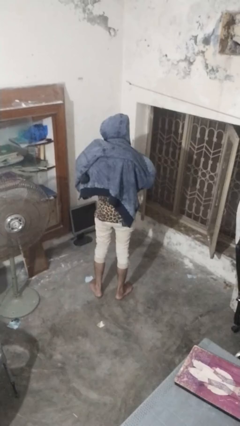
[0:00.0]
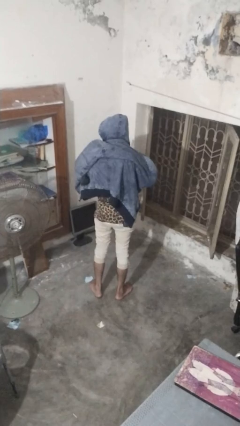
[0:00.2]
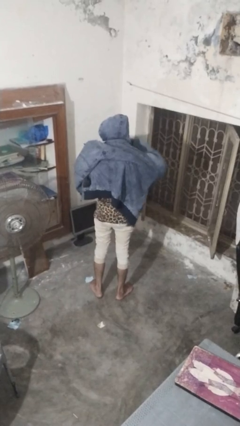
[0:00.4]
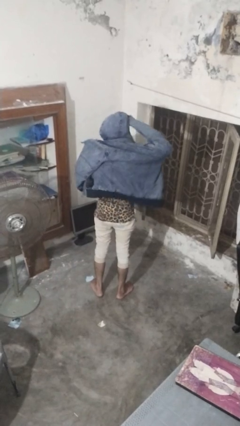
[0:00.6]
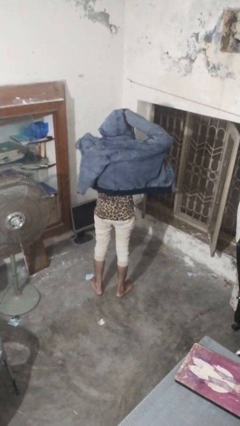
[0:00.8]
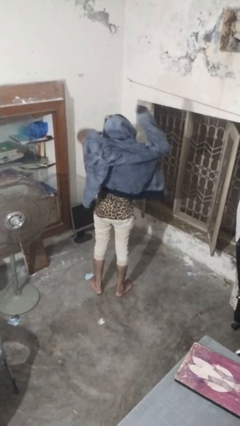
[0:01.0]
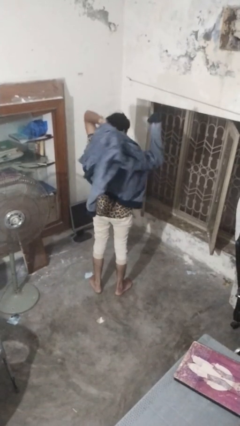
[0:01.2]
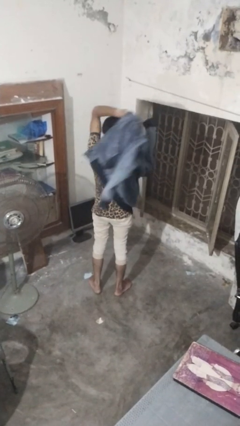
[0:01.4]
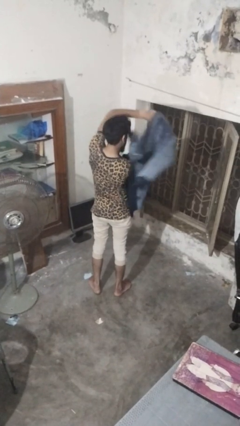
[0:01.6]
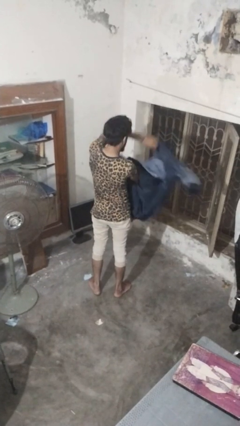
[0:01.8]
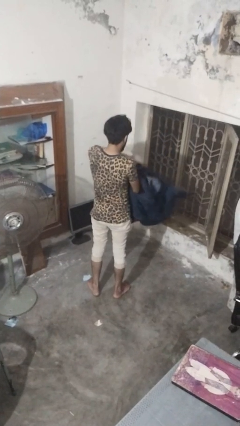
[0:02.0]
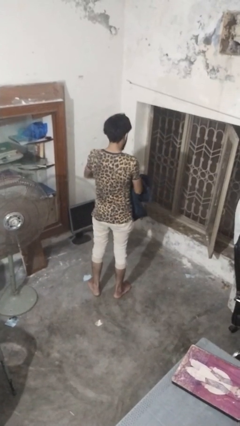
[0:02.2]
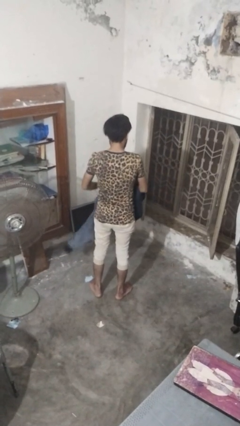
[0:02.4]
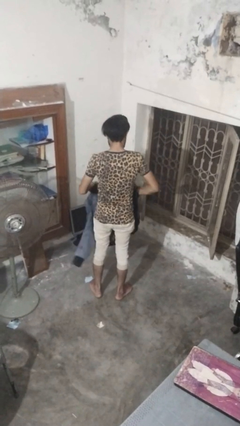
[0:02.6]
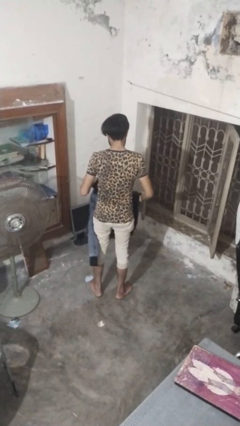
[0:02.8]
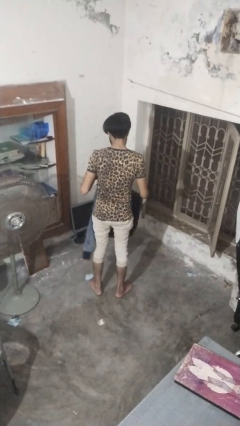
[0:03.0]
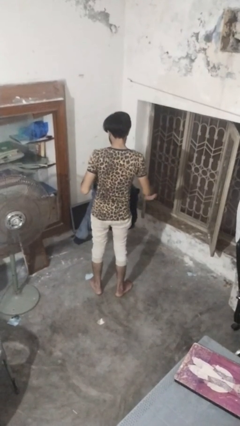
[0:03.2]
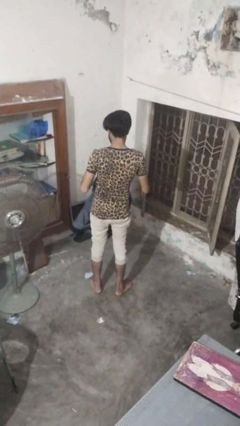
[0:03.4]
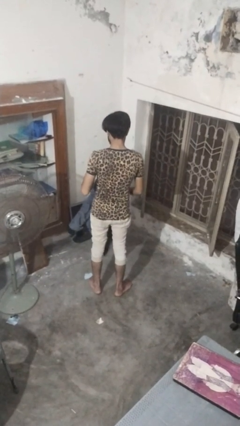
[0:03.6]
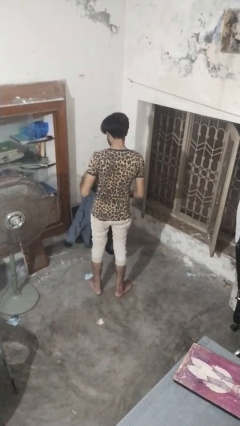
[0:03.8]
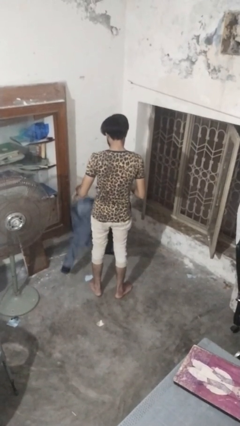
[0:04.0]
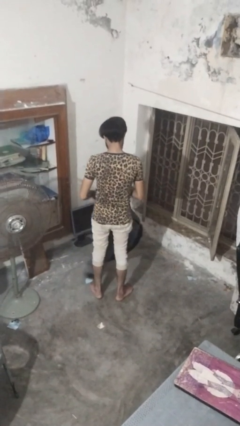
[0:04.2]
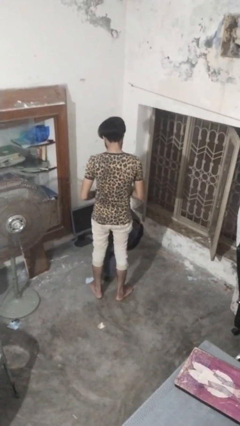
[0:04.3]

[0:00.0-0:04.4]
person takes off hoodie

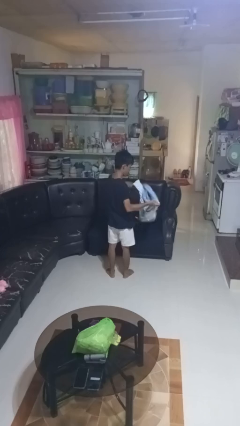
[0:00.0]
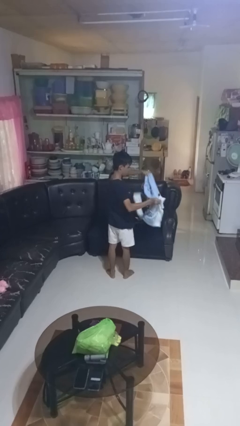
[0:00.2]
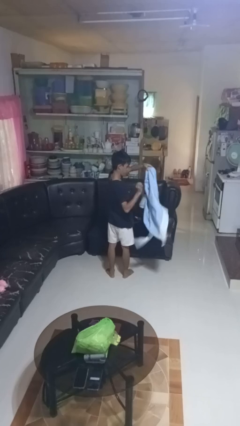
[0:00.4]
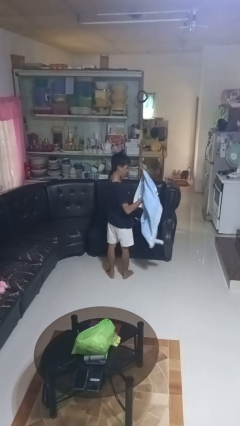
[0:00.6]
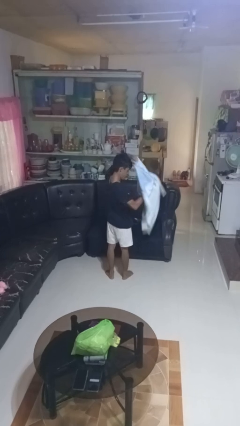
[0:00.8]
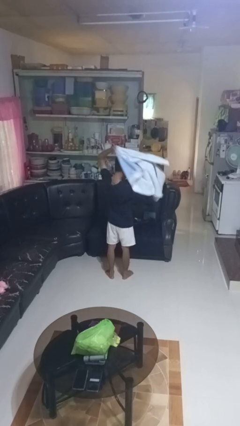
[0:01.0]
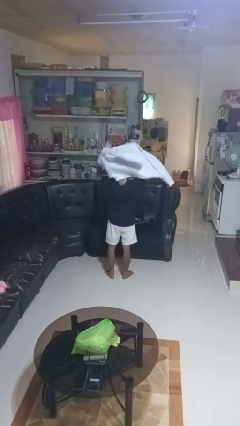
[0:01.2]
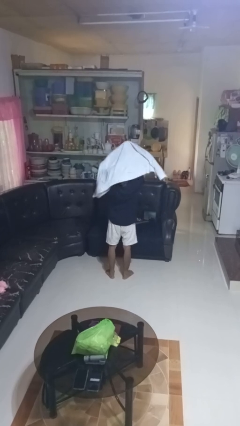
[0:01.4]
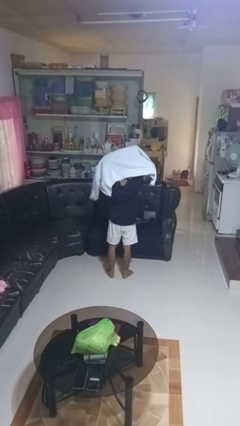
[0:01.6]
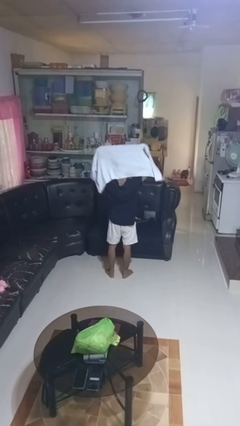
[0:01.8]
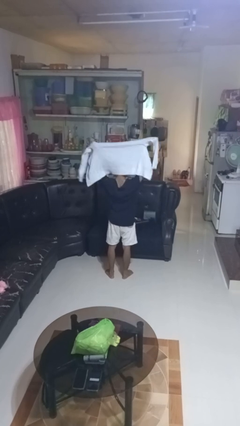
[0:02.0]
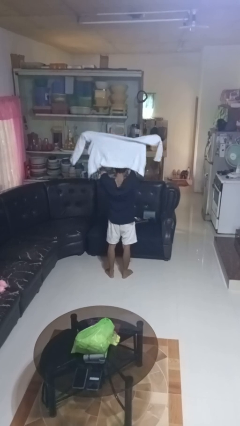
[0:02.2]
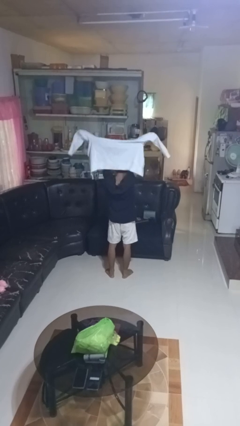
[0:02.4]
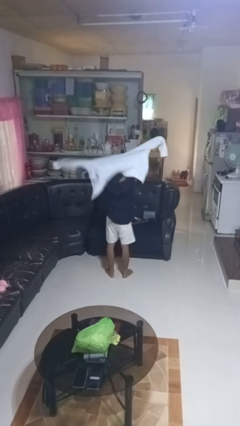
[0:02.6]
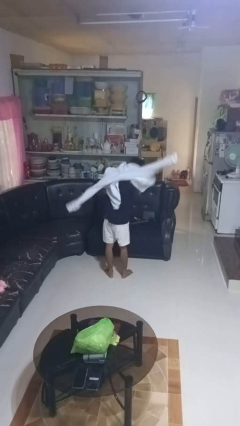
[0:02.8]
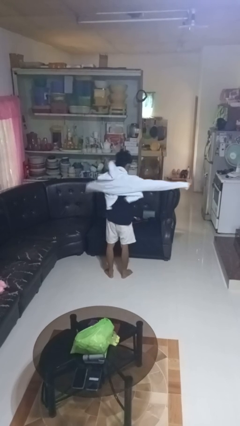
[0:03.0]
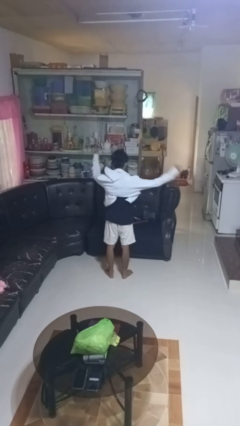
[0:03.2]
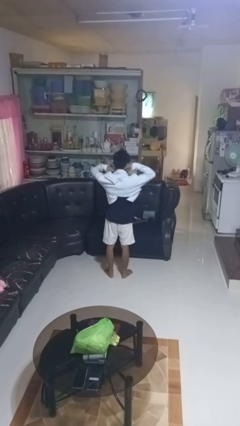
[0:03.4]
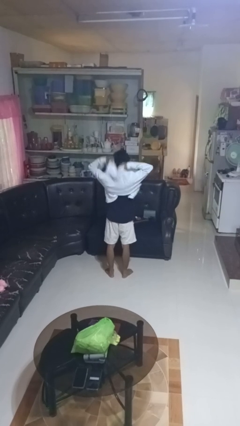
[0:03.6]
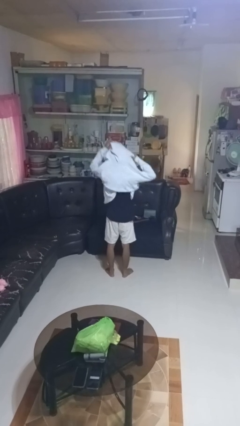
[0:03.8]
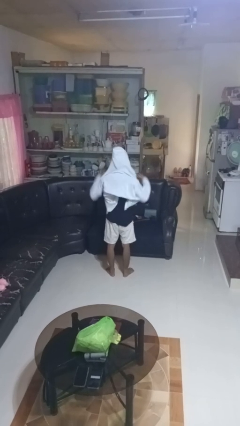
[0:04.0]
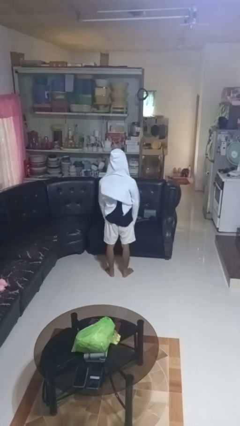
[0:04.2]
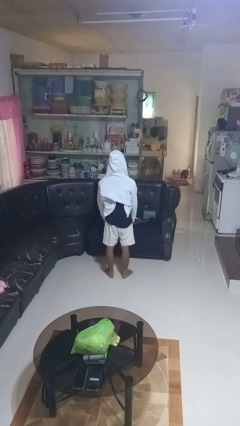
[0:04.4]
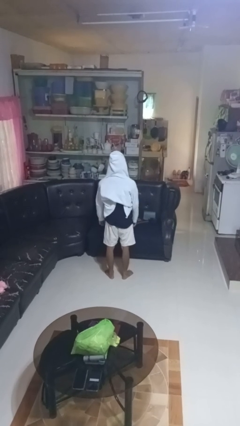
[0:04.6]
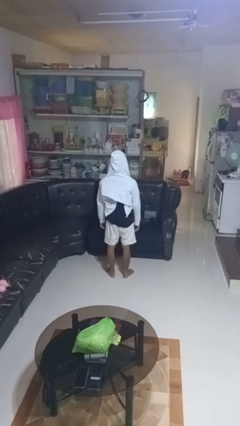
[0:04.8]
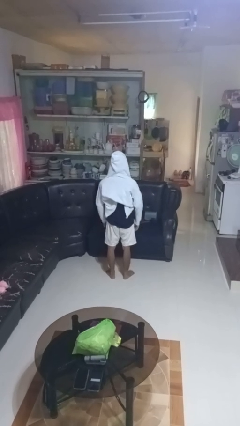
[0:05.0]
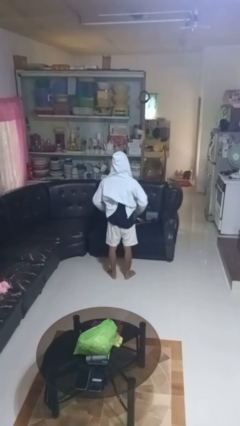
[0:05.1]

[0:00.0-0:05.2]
person puts on hoodie

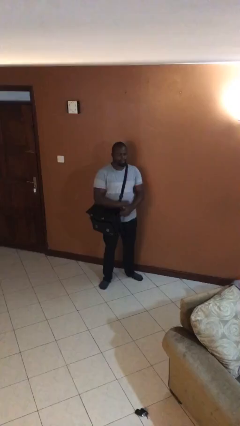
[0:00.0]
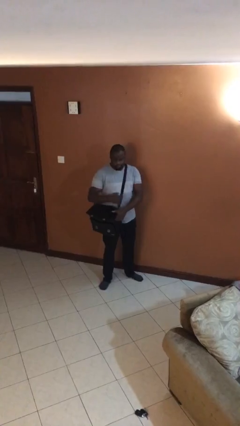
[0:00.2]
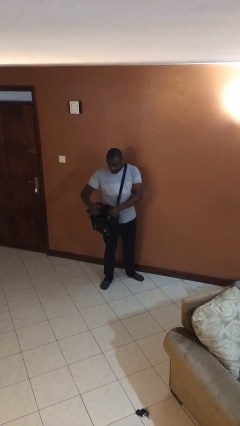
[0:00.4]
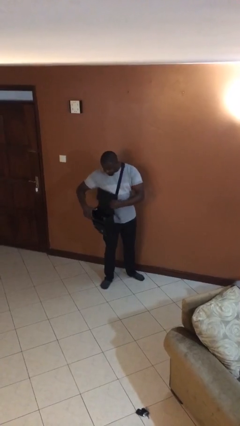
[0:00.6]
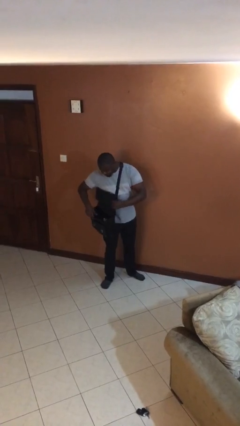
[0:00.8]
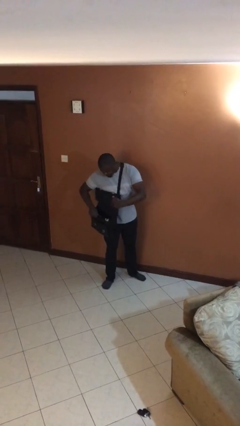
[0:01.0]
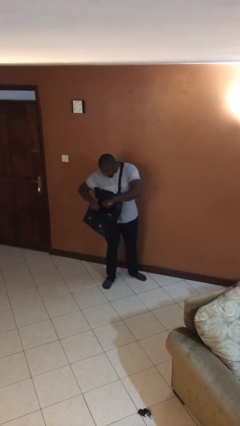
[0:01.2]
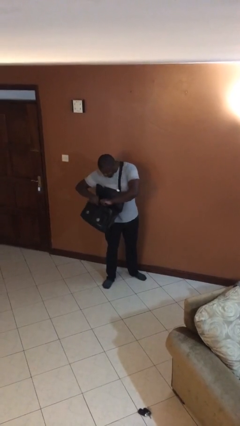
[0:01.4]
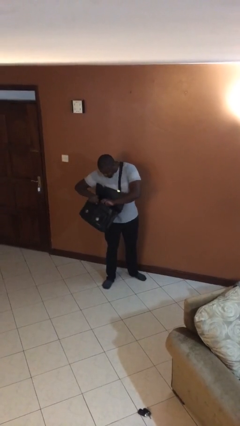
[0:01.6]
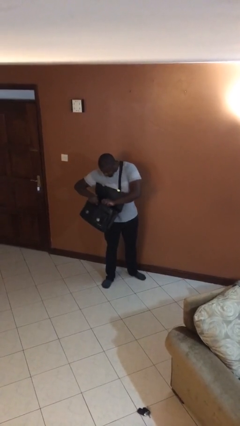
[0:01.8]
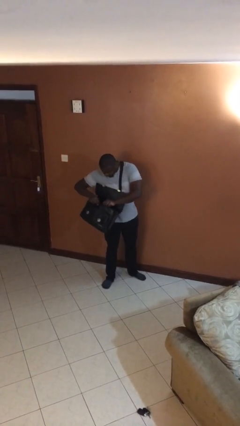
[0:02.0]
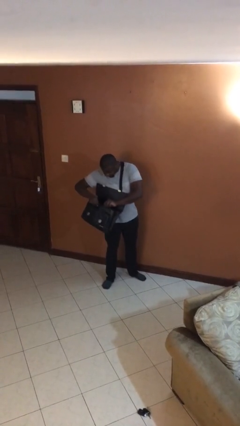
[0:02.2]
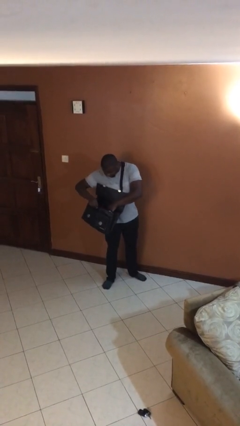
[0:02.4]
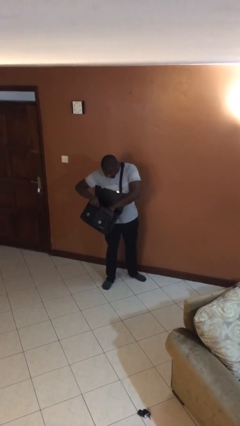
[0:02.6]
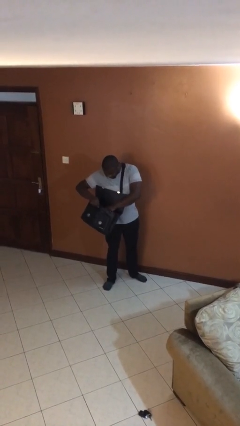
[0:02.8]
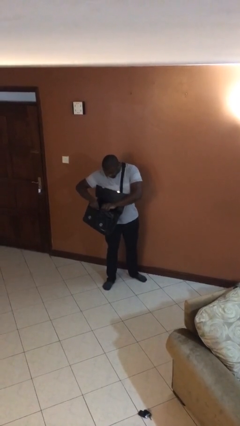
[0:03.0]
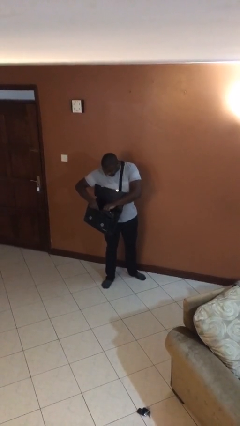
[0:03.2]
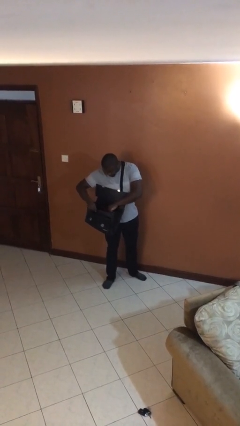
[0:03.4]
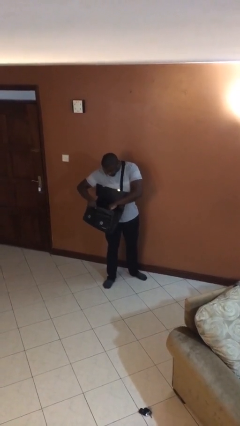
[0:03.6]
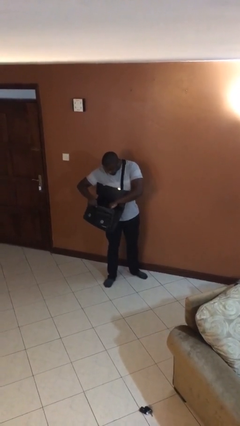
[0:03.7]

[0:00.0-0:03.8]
person searches in purse

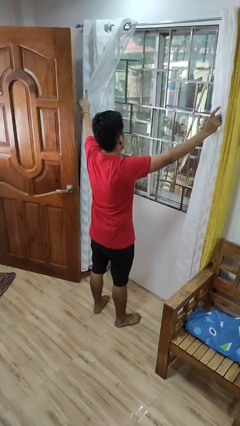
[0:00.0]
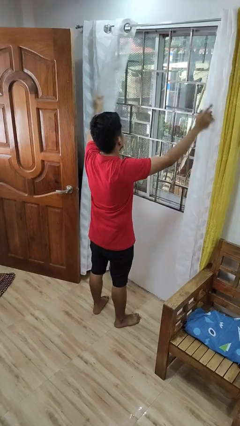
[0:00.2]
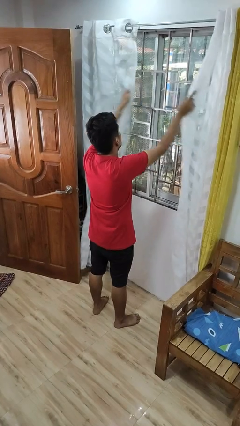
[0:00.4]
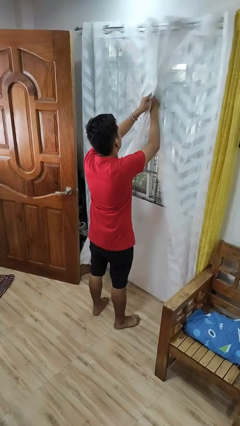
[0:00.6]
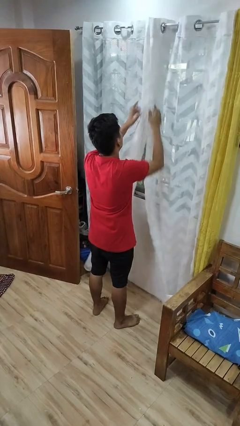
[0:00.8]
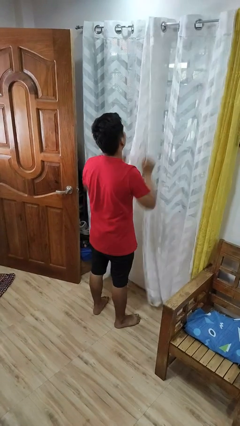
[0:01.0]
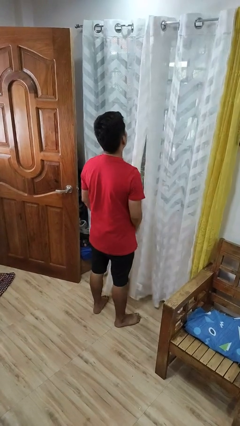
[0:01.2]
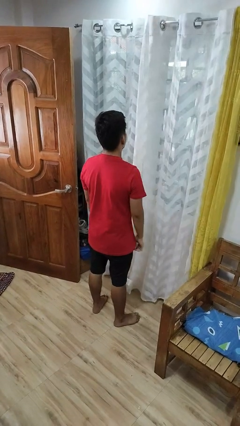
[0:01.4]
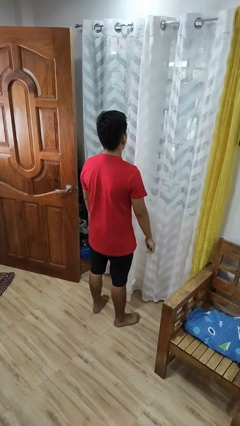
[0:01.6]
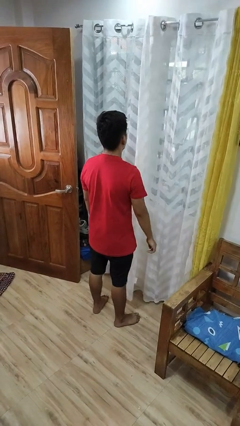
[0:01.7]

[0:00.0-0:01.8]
person closes curtains

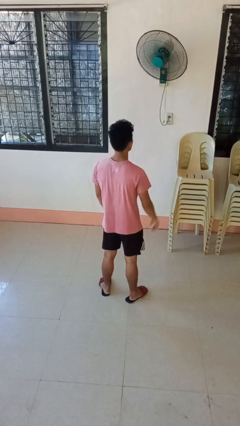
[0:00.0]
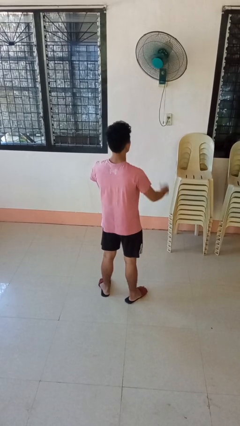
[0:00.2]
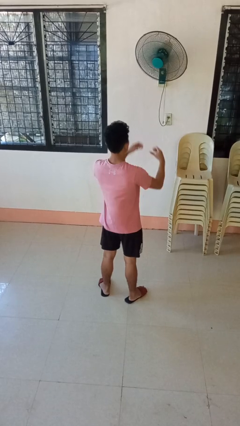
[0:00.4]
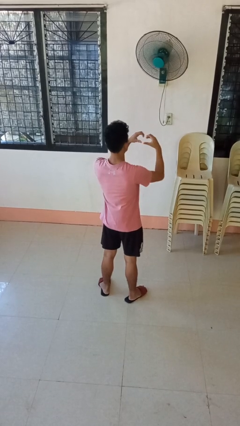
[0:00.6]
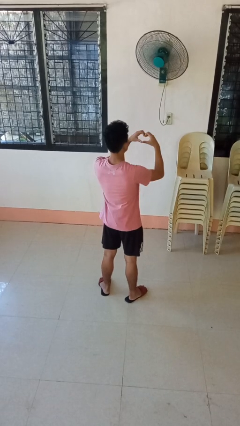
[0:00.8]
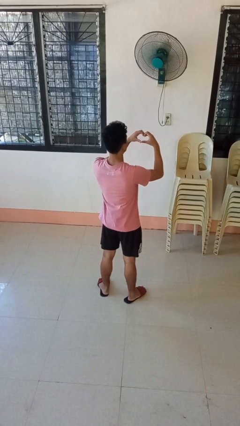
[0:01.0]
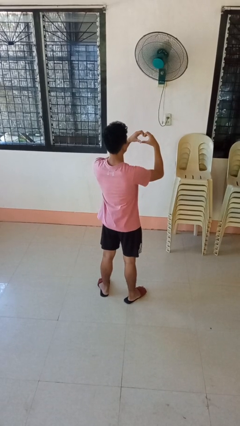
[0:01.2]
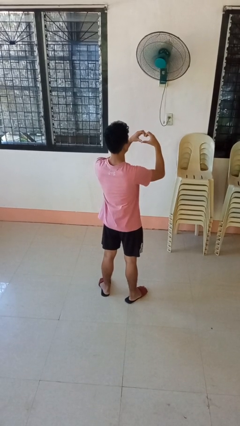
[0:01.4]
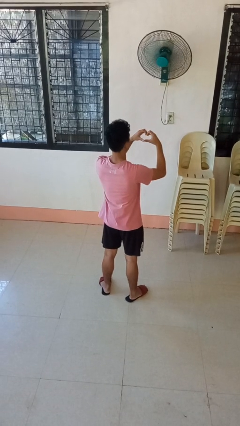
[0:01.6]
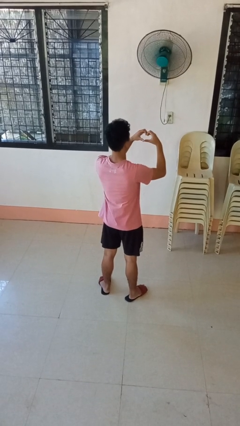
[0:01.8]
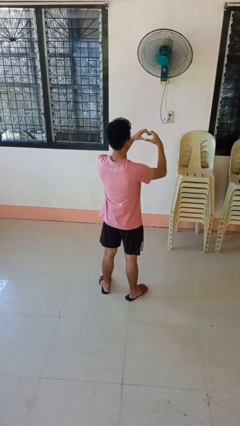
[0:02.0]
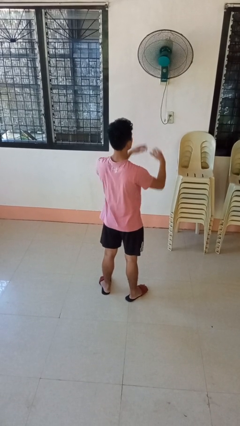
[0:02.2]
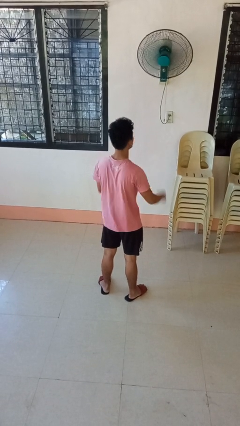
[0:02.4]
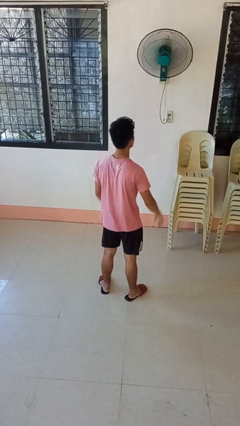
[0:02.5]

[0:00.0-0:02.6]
person gestures heart
